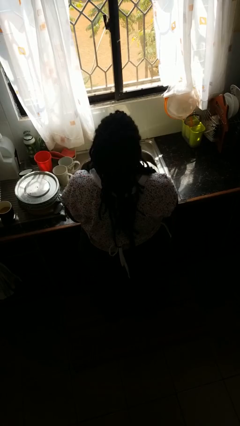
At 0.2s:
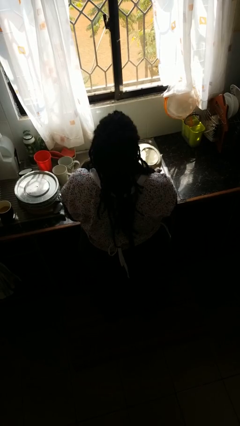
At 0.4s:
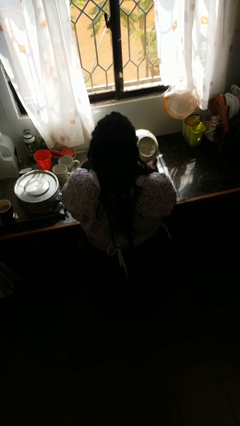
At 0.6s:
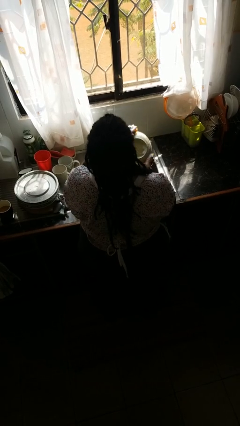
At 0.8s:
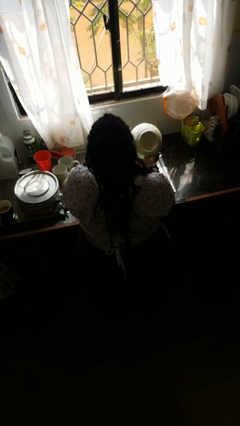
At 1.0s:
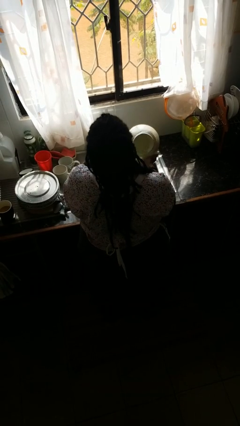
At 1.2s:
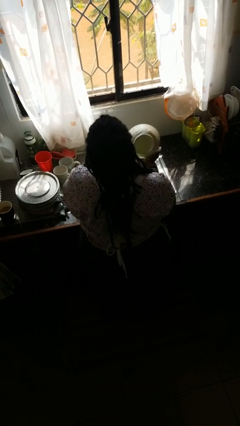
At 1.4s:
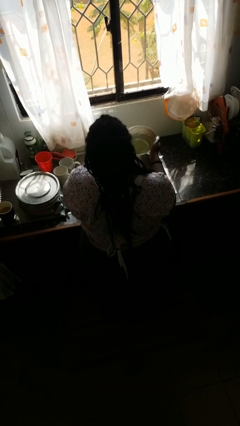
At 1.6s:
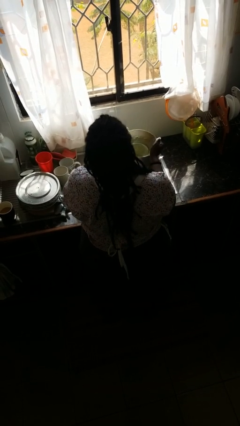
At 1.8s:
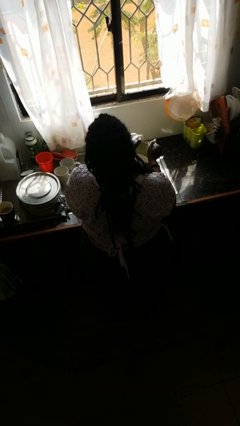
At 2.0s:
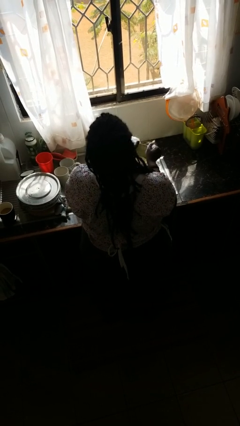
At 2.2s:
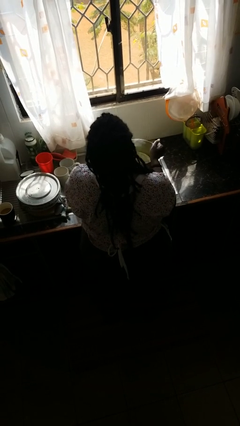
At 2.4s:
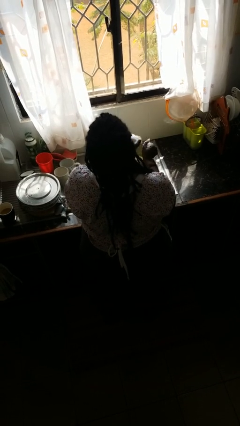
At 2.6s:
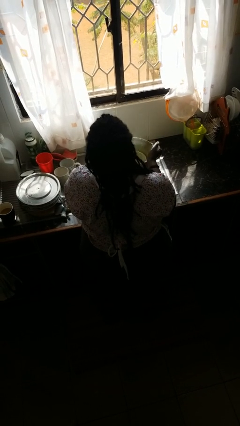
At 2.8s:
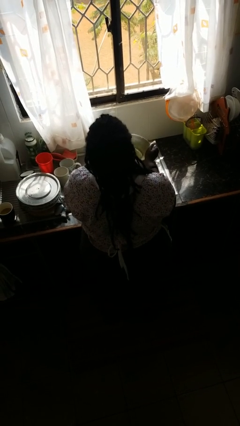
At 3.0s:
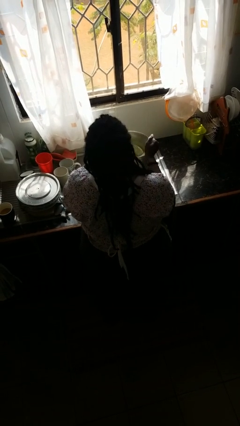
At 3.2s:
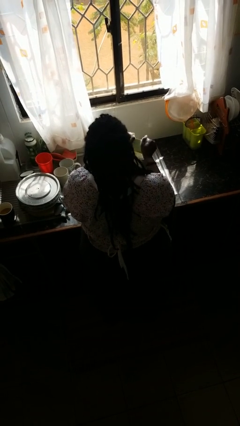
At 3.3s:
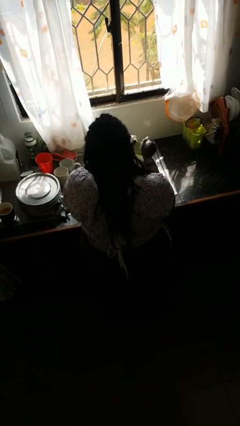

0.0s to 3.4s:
person washes dish

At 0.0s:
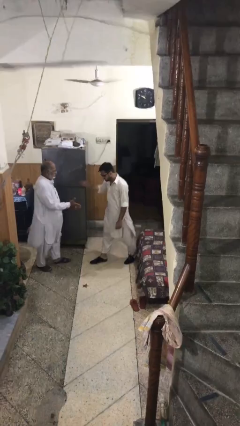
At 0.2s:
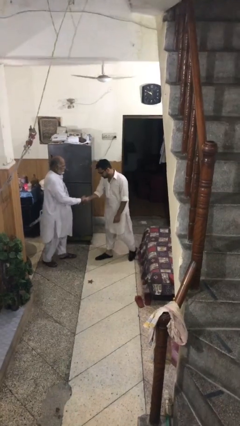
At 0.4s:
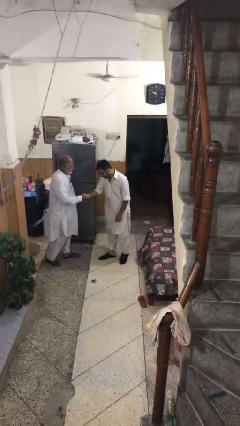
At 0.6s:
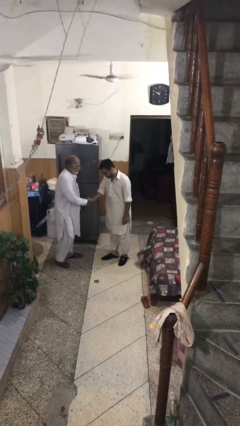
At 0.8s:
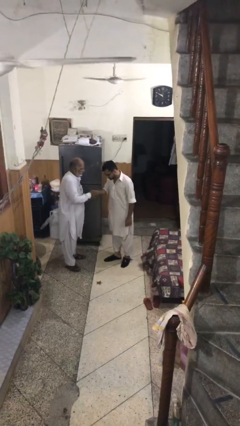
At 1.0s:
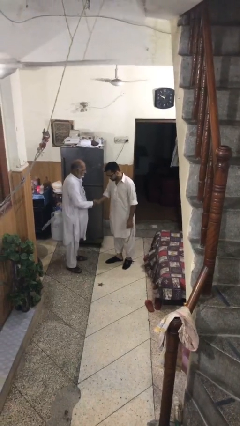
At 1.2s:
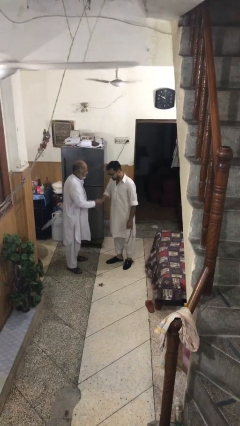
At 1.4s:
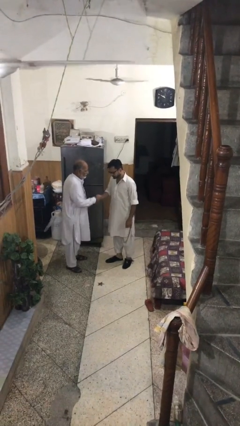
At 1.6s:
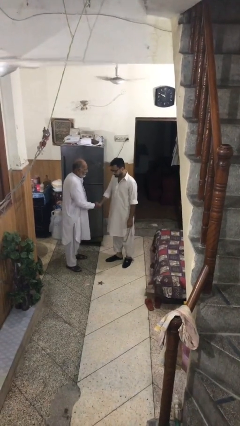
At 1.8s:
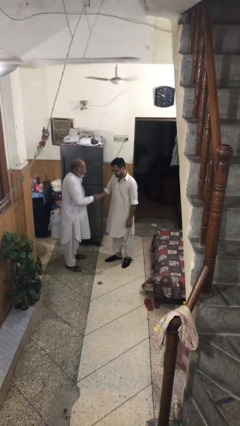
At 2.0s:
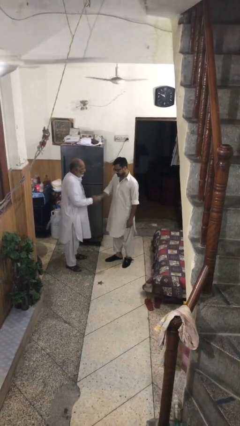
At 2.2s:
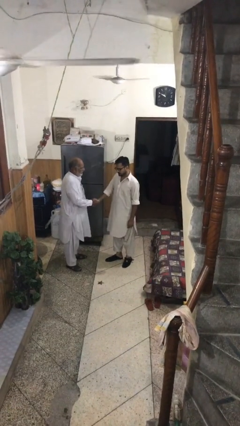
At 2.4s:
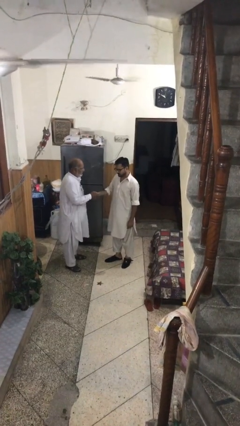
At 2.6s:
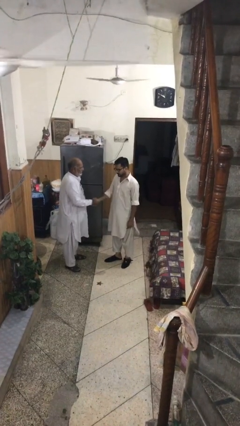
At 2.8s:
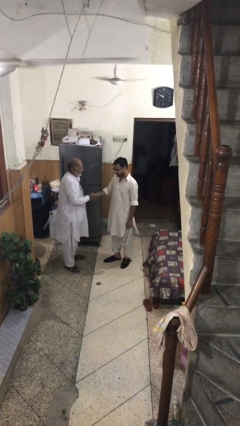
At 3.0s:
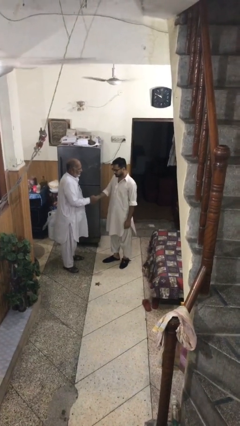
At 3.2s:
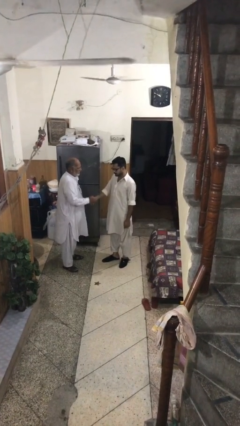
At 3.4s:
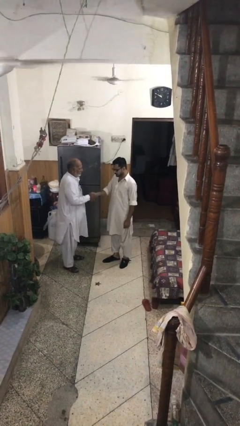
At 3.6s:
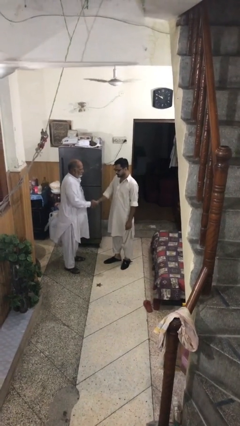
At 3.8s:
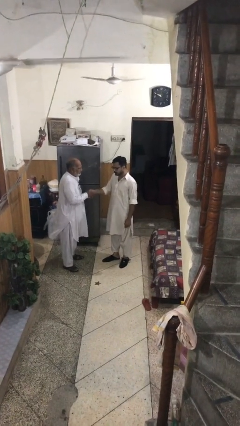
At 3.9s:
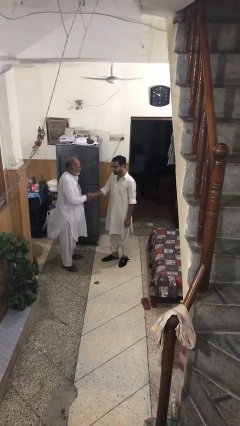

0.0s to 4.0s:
person shakes hand

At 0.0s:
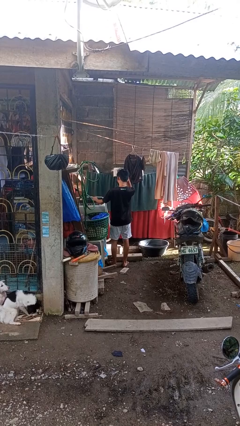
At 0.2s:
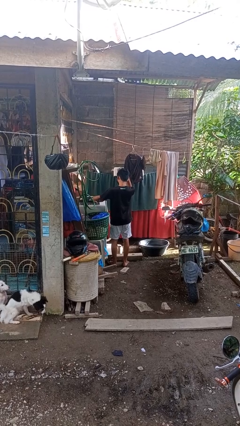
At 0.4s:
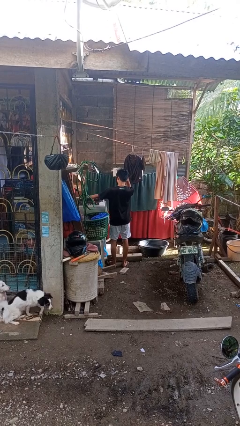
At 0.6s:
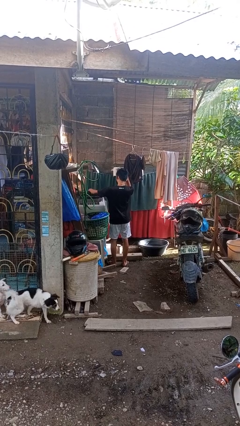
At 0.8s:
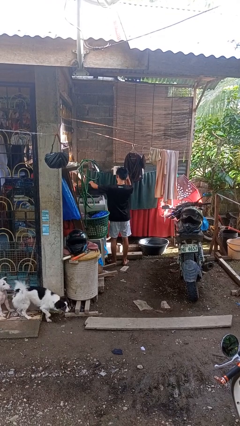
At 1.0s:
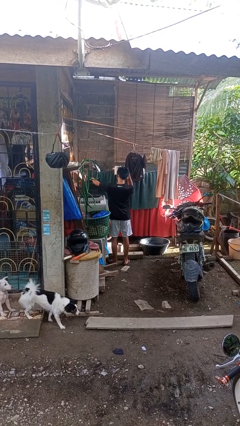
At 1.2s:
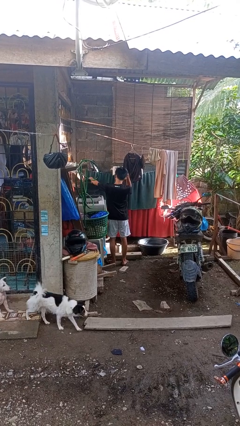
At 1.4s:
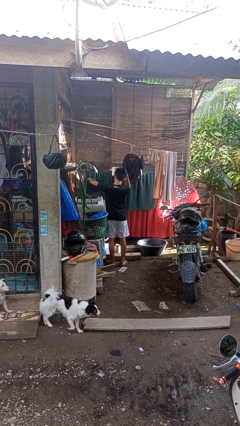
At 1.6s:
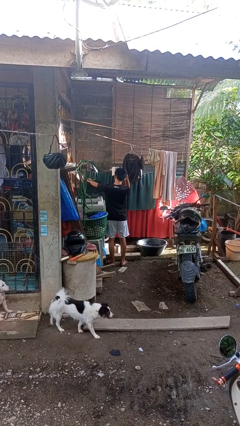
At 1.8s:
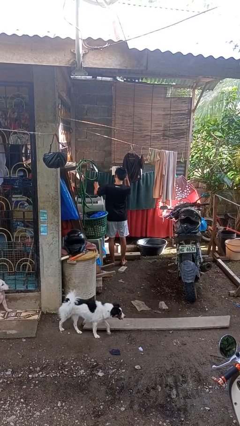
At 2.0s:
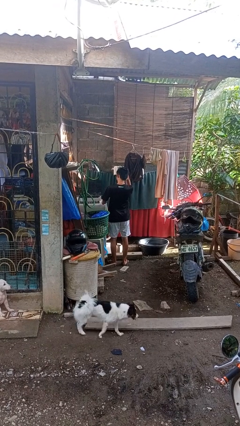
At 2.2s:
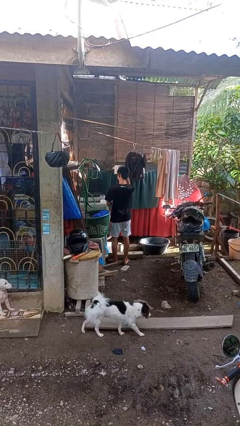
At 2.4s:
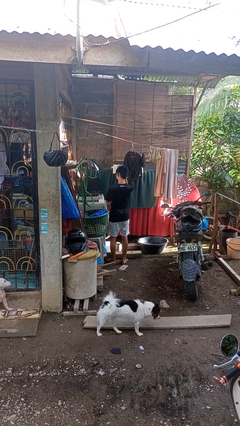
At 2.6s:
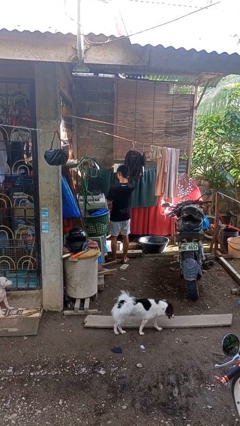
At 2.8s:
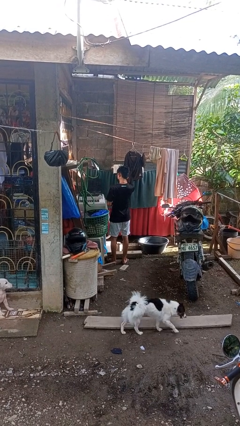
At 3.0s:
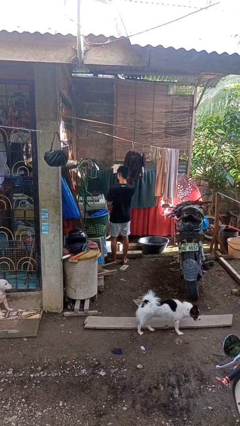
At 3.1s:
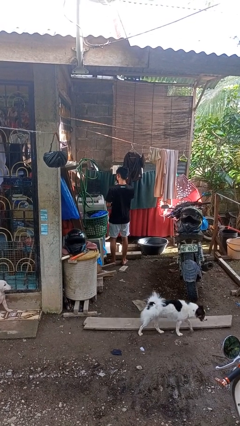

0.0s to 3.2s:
person opens clothes washer

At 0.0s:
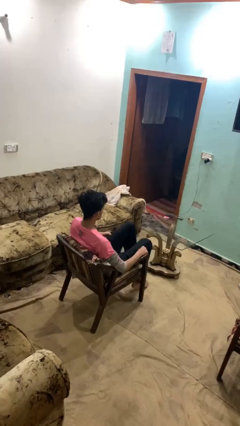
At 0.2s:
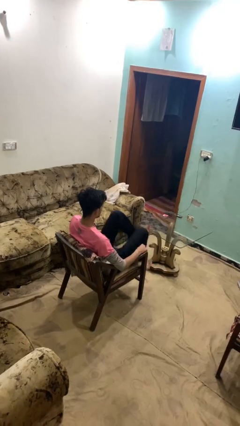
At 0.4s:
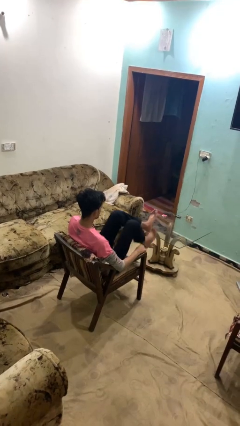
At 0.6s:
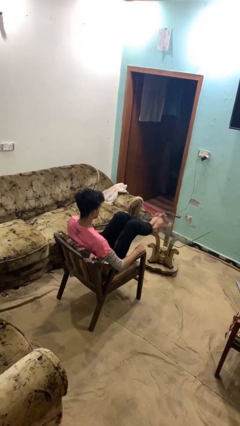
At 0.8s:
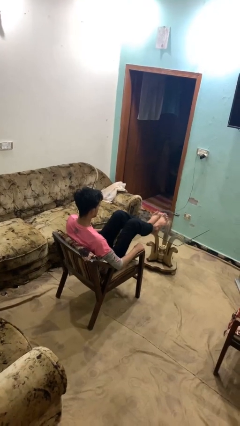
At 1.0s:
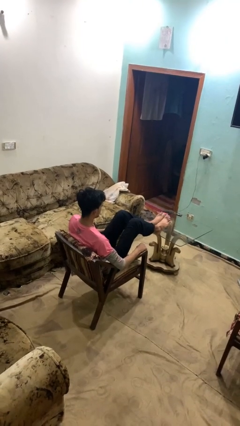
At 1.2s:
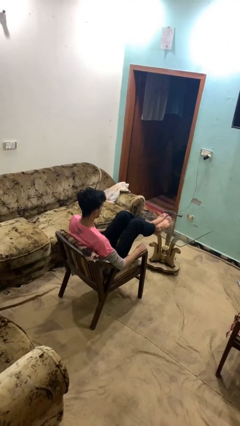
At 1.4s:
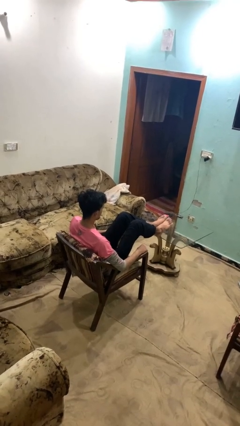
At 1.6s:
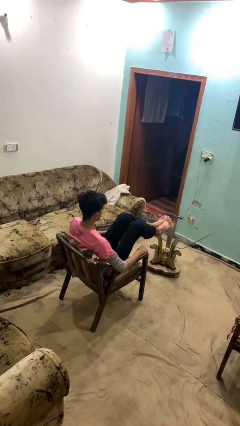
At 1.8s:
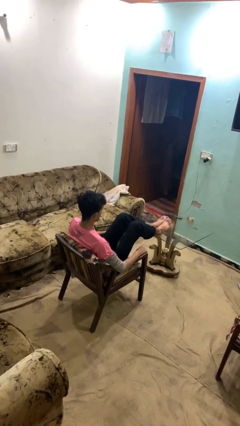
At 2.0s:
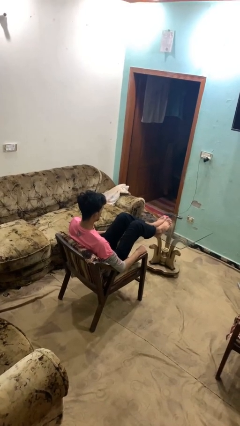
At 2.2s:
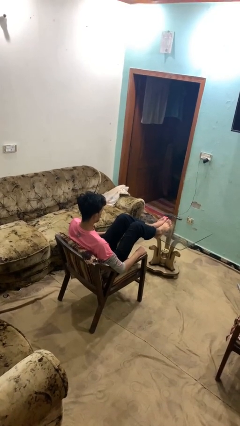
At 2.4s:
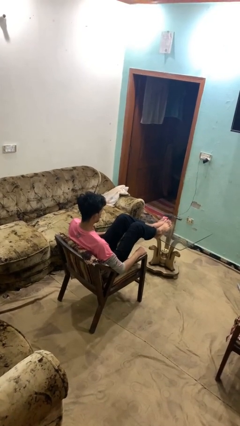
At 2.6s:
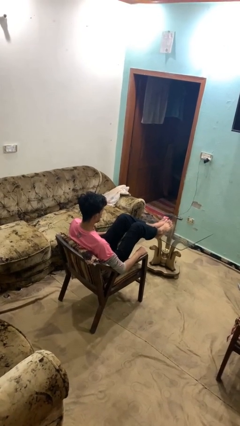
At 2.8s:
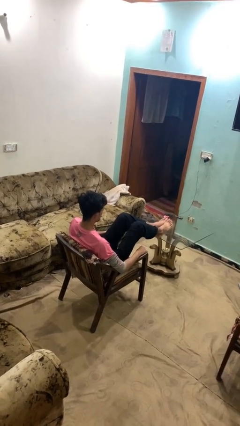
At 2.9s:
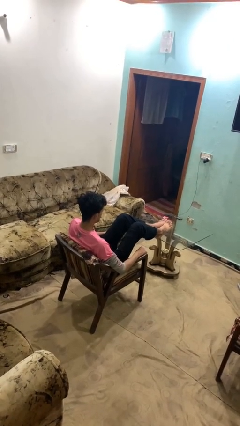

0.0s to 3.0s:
person puts feet up

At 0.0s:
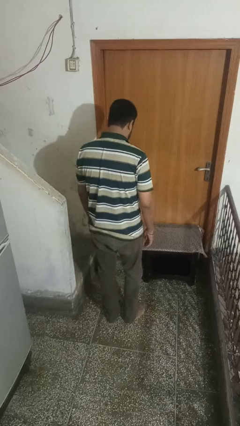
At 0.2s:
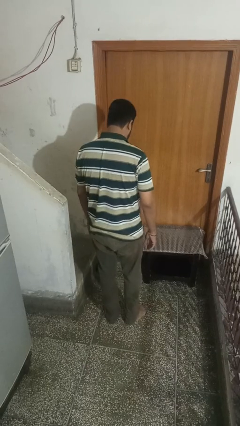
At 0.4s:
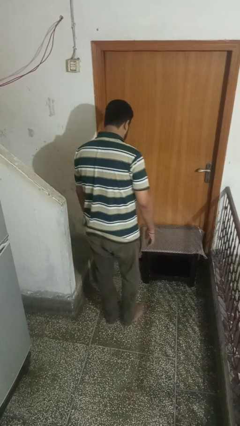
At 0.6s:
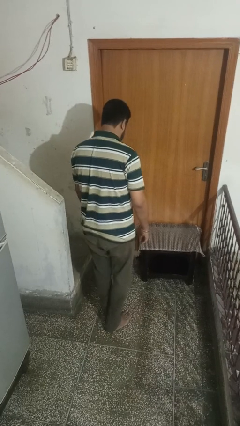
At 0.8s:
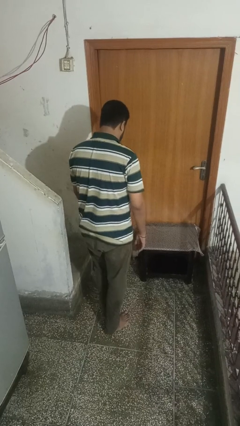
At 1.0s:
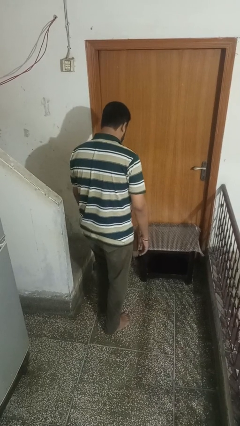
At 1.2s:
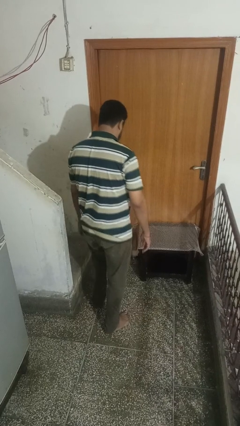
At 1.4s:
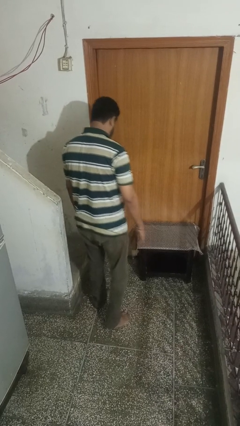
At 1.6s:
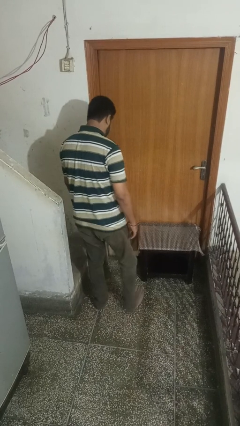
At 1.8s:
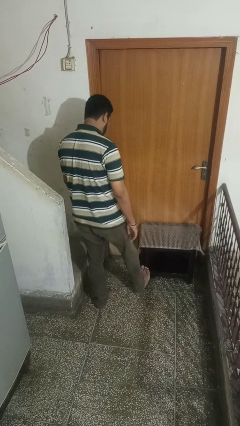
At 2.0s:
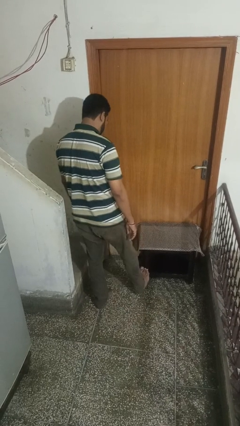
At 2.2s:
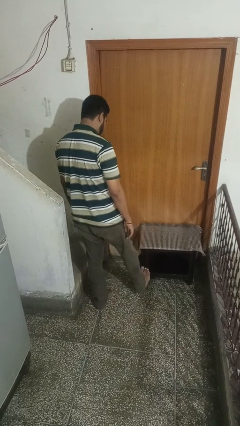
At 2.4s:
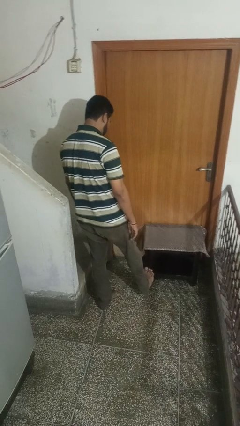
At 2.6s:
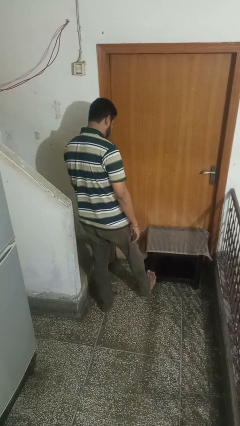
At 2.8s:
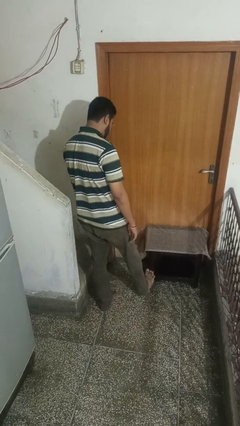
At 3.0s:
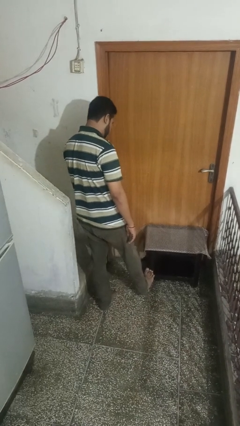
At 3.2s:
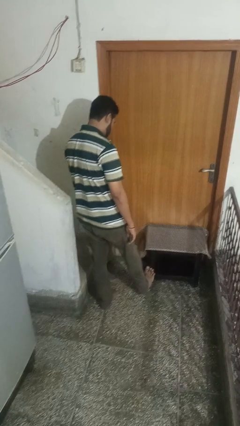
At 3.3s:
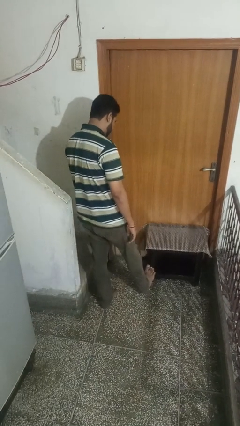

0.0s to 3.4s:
person stubs toe

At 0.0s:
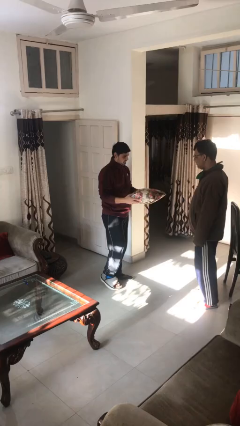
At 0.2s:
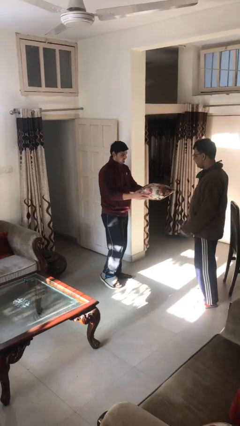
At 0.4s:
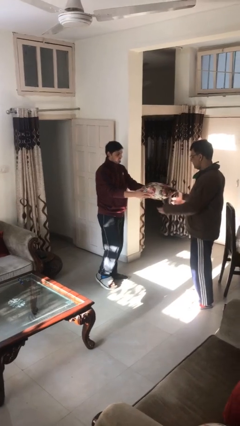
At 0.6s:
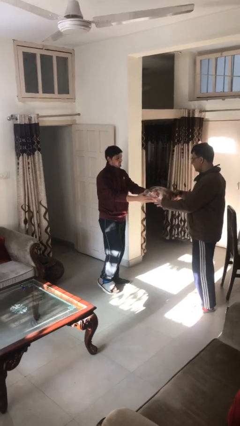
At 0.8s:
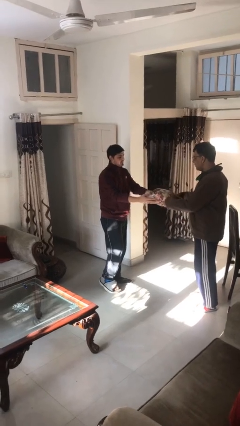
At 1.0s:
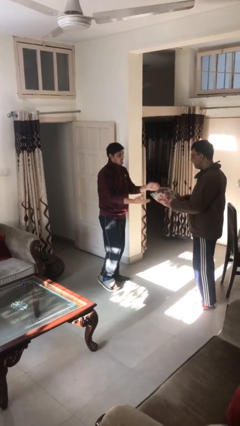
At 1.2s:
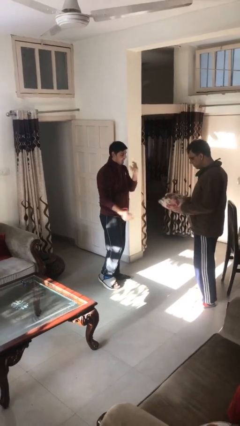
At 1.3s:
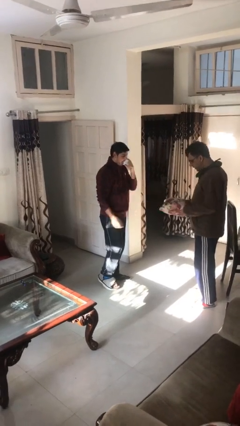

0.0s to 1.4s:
person transfers object to person
